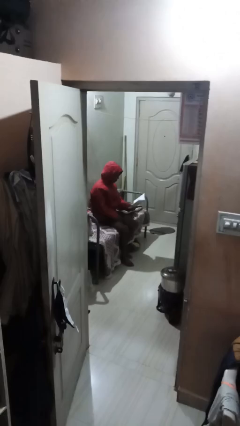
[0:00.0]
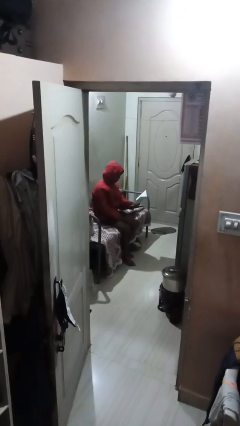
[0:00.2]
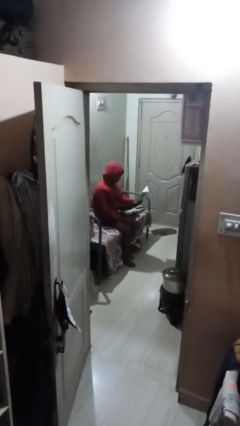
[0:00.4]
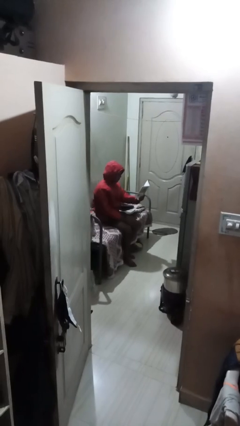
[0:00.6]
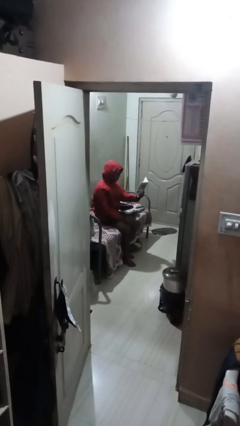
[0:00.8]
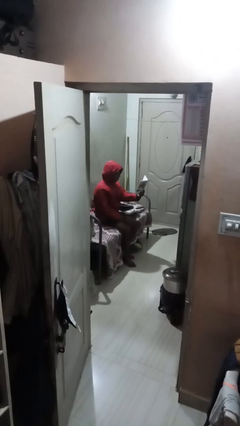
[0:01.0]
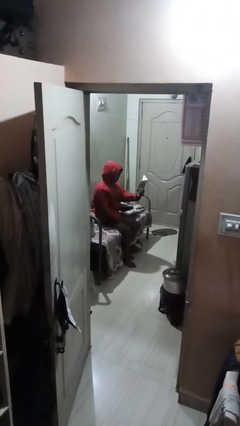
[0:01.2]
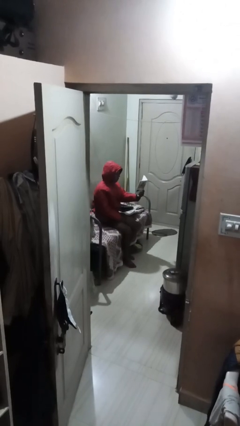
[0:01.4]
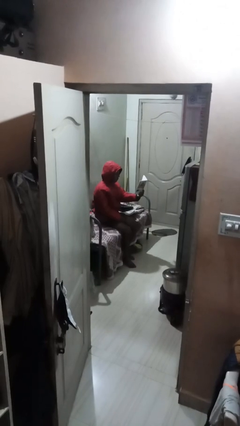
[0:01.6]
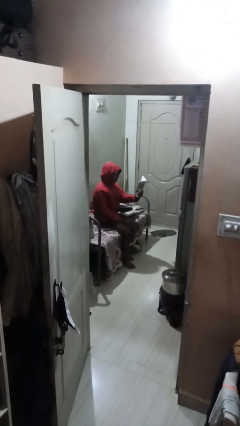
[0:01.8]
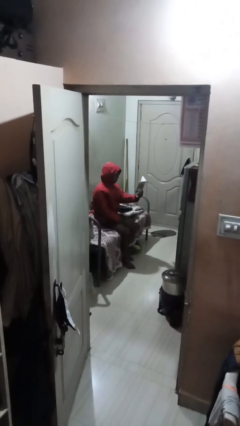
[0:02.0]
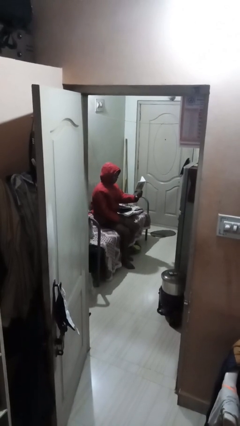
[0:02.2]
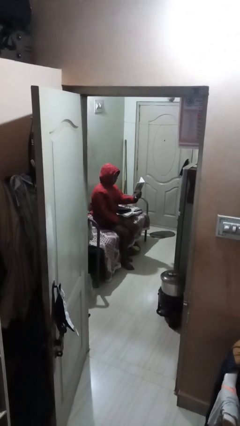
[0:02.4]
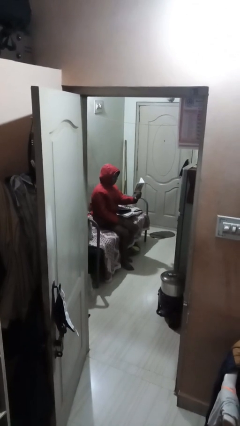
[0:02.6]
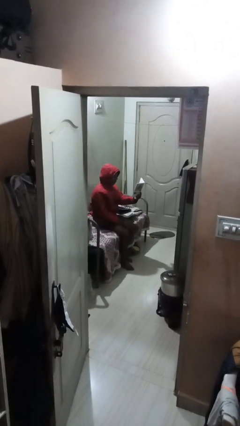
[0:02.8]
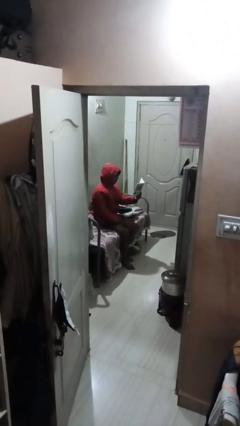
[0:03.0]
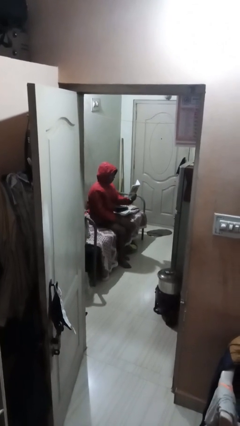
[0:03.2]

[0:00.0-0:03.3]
person reads document

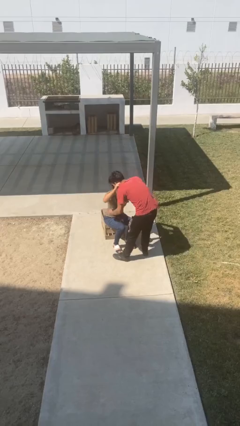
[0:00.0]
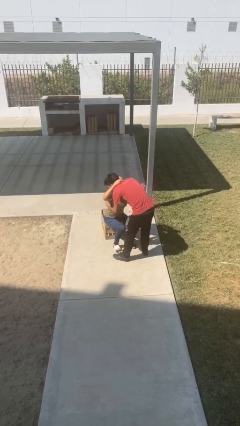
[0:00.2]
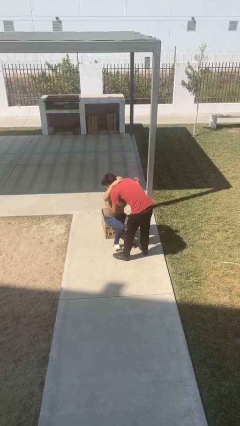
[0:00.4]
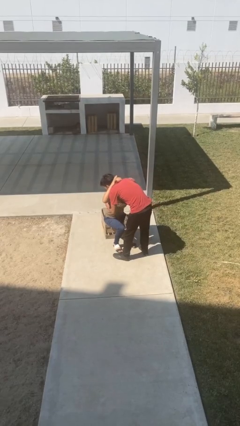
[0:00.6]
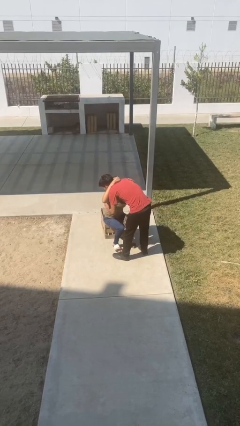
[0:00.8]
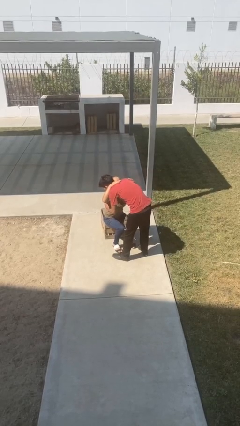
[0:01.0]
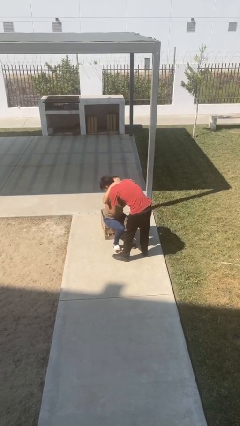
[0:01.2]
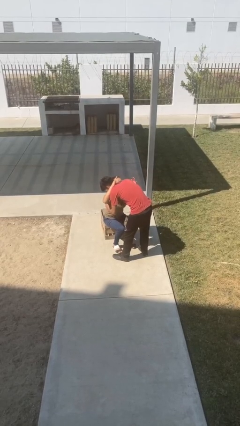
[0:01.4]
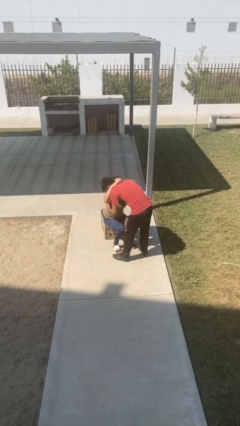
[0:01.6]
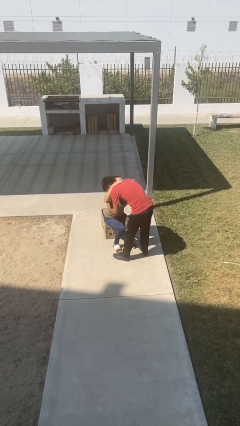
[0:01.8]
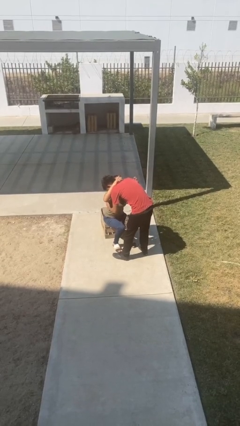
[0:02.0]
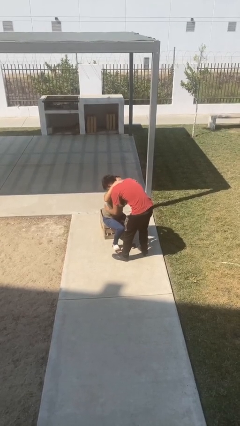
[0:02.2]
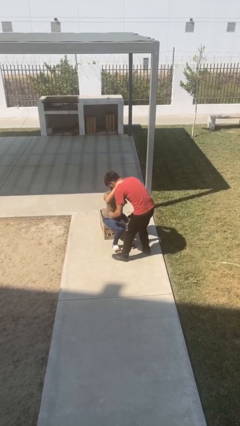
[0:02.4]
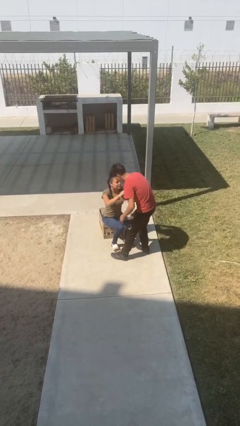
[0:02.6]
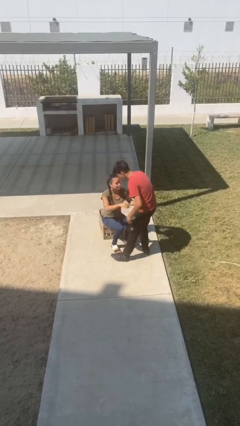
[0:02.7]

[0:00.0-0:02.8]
person embraces person

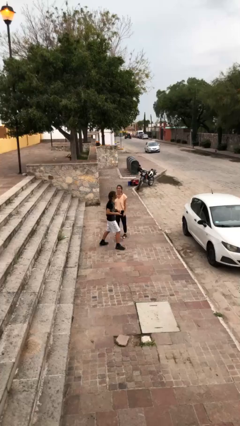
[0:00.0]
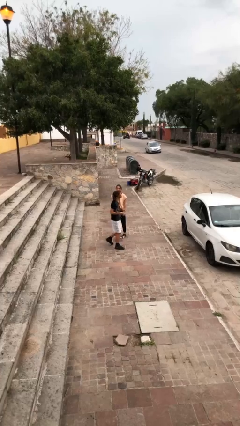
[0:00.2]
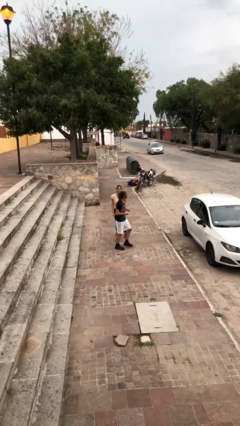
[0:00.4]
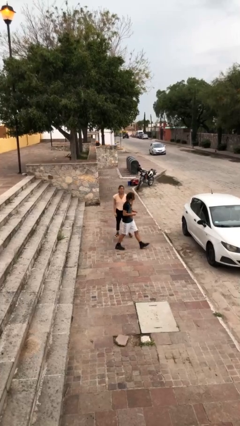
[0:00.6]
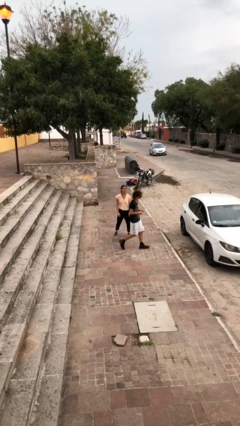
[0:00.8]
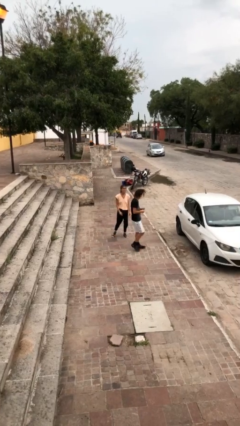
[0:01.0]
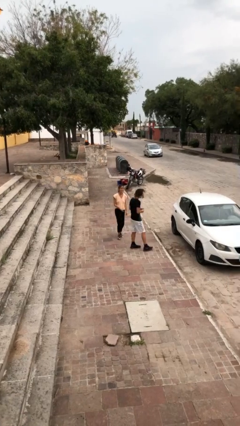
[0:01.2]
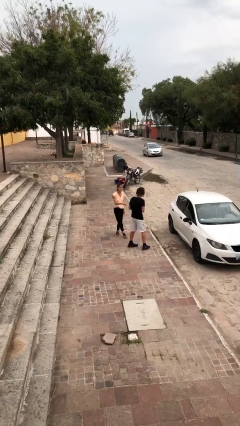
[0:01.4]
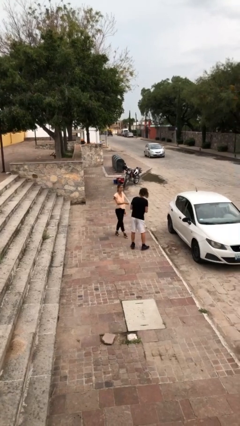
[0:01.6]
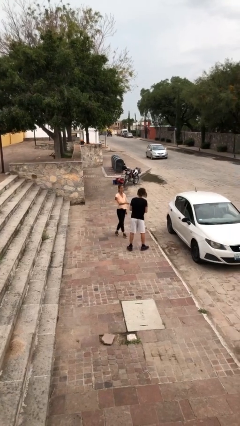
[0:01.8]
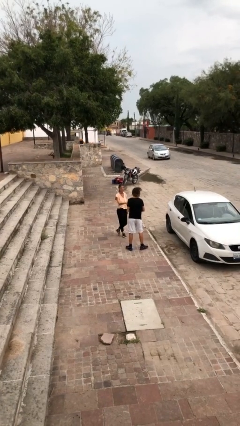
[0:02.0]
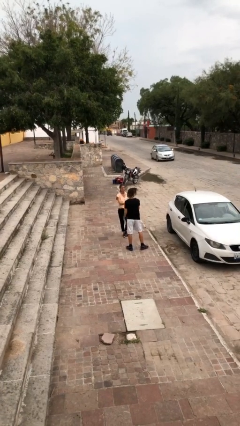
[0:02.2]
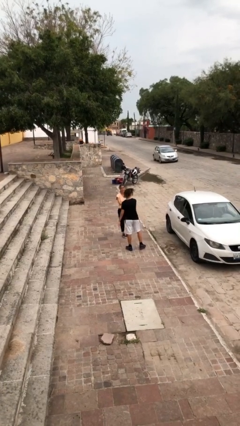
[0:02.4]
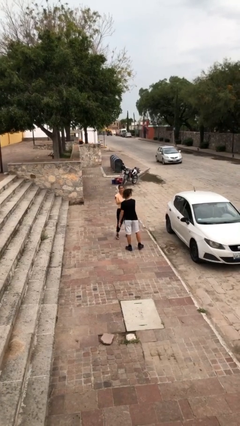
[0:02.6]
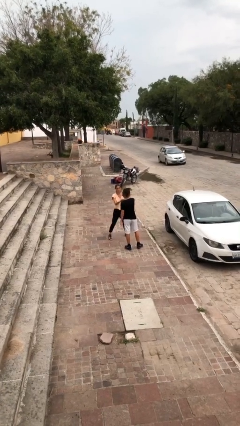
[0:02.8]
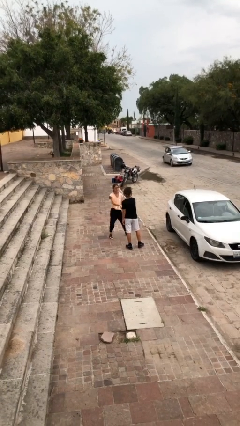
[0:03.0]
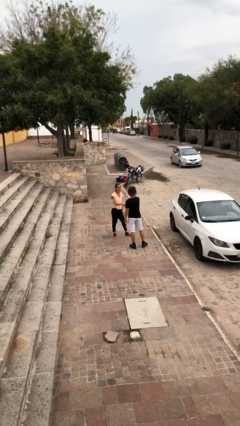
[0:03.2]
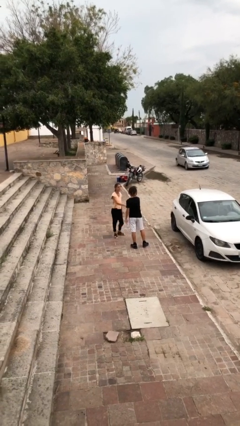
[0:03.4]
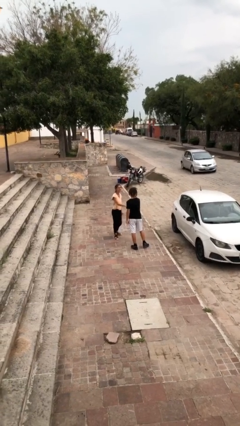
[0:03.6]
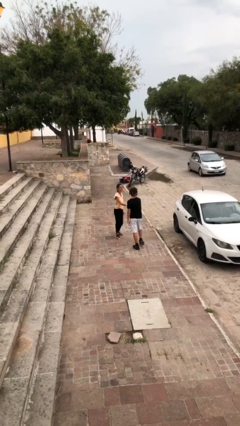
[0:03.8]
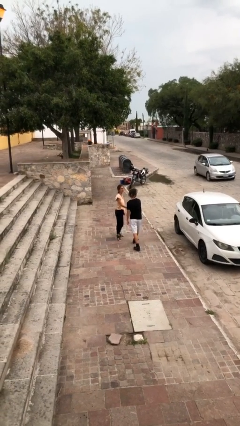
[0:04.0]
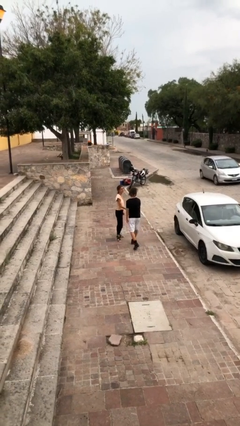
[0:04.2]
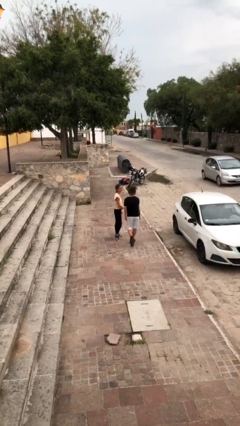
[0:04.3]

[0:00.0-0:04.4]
person shakes hand

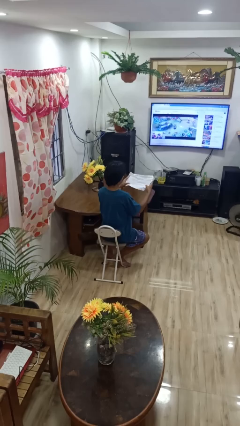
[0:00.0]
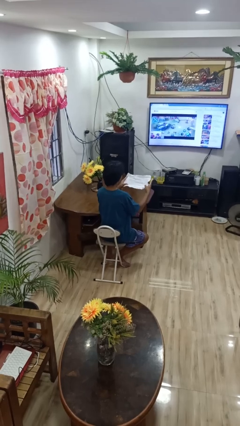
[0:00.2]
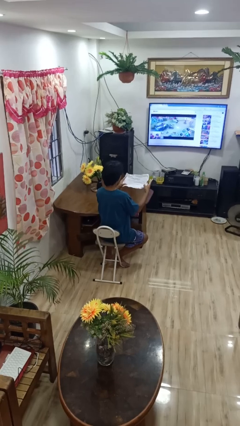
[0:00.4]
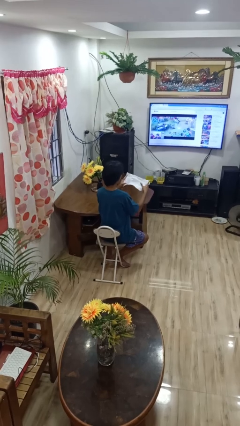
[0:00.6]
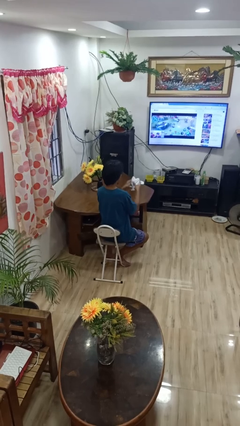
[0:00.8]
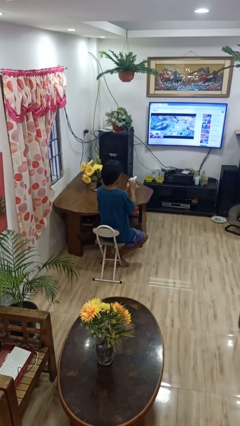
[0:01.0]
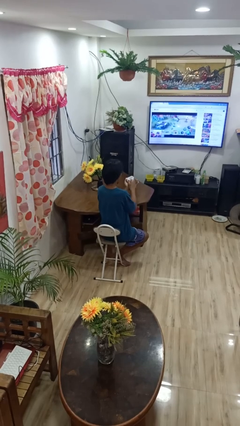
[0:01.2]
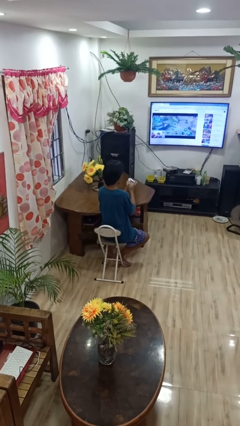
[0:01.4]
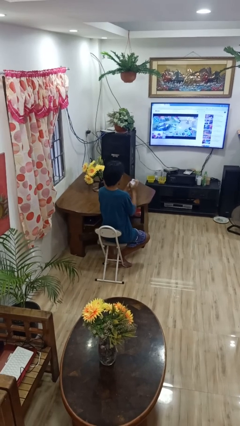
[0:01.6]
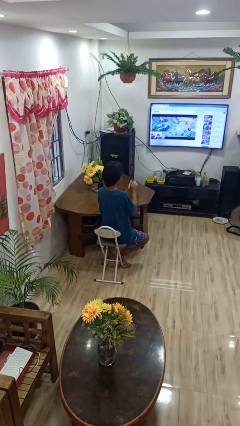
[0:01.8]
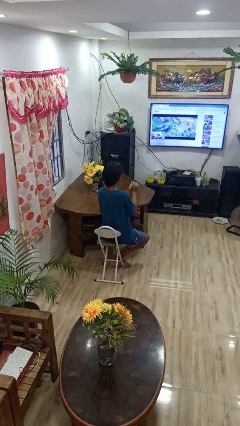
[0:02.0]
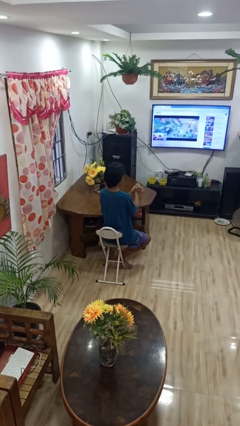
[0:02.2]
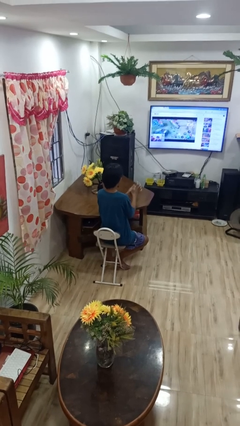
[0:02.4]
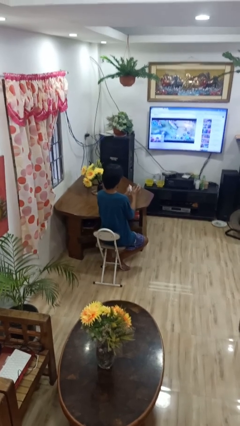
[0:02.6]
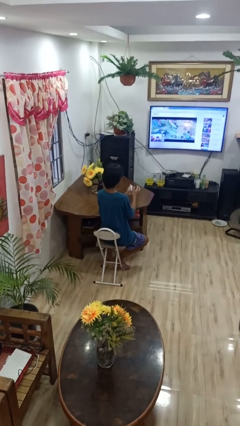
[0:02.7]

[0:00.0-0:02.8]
person crumples paper

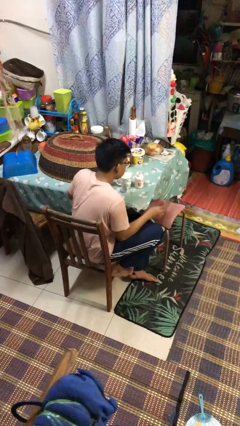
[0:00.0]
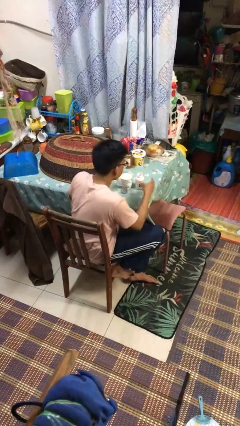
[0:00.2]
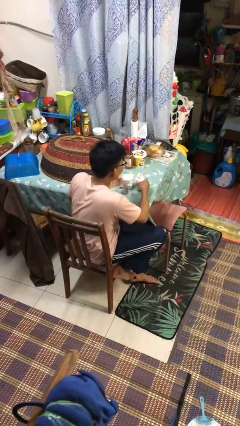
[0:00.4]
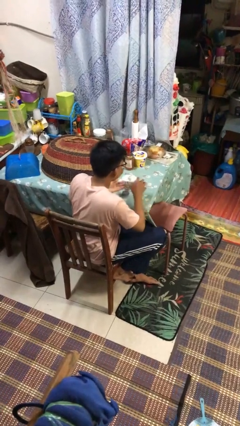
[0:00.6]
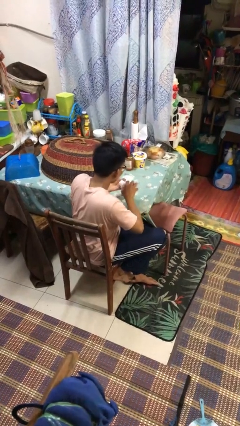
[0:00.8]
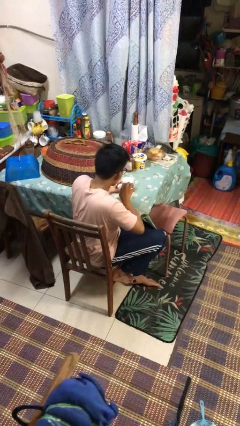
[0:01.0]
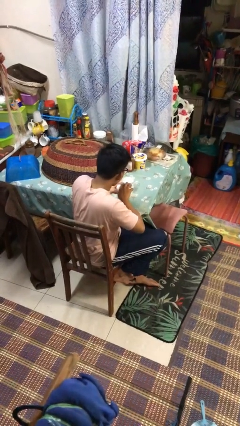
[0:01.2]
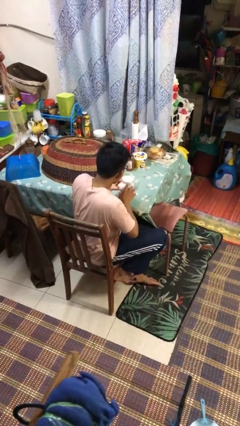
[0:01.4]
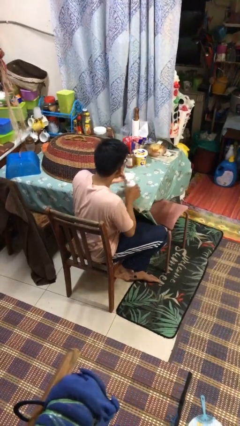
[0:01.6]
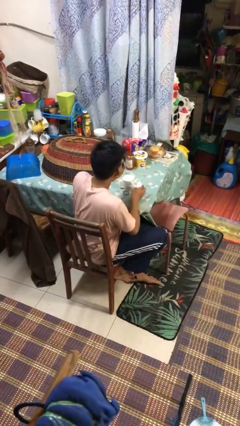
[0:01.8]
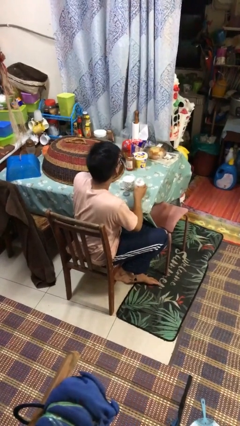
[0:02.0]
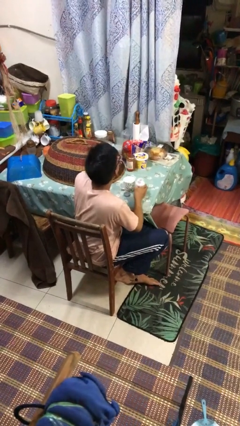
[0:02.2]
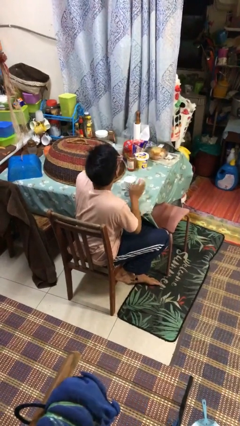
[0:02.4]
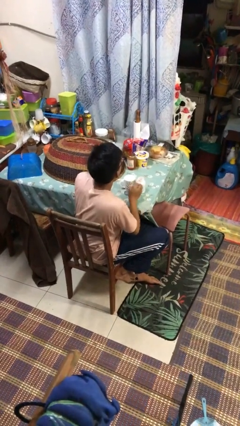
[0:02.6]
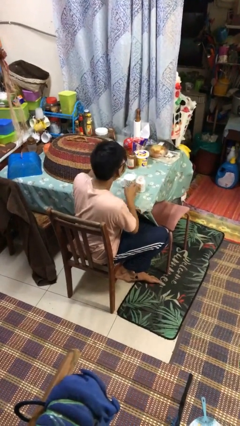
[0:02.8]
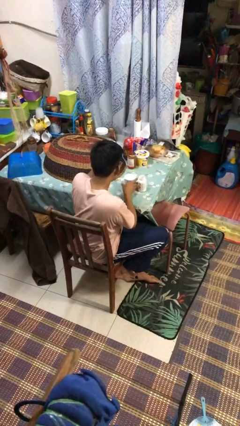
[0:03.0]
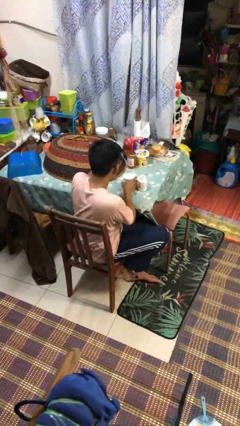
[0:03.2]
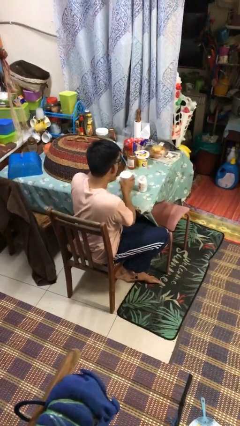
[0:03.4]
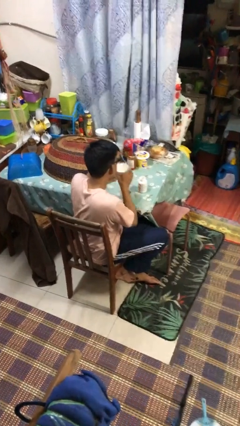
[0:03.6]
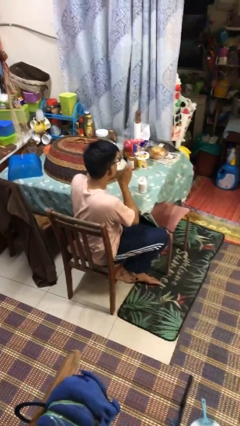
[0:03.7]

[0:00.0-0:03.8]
person takes medicine pills

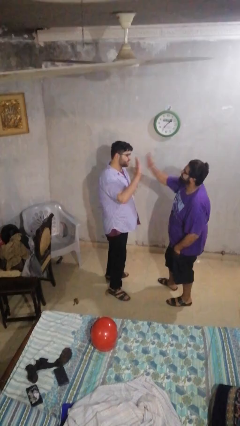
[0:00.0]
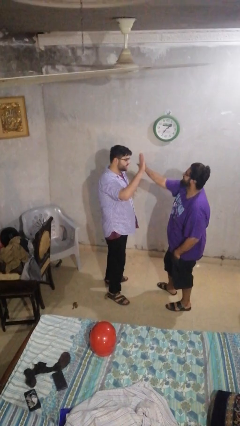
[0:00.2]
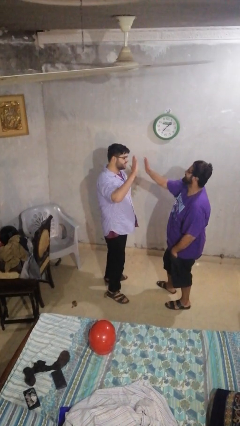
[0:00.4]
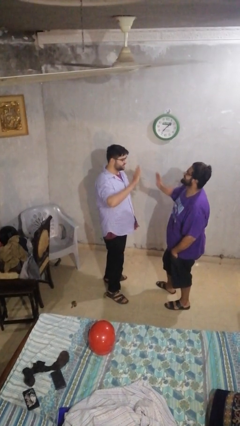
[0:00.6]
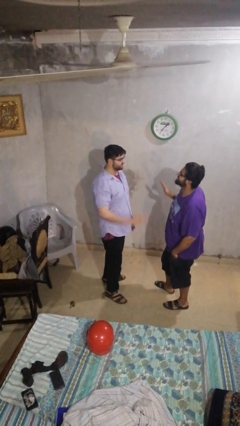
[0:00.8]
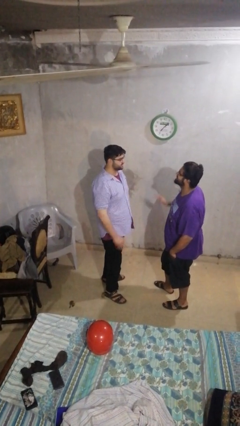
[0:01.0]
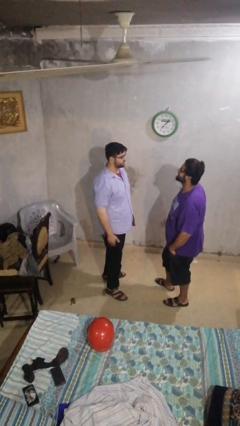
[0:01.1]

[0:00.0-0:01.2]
person highfives hand
